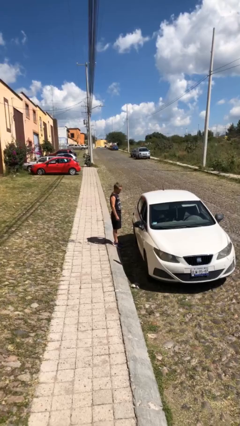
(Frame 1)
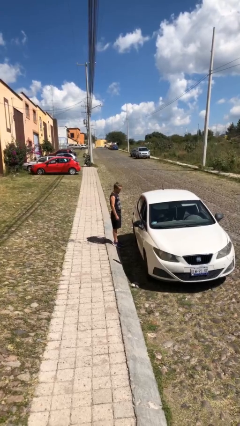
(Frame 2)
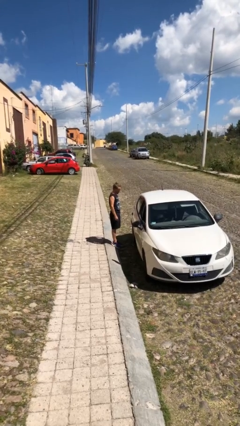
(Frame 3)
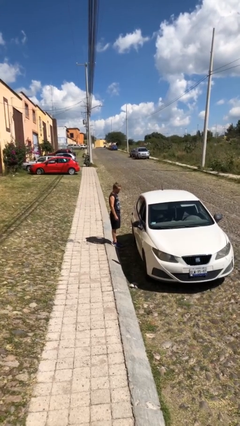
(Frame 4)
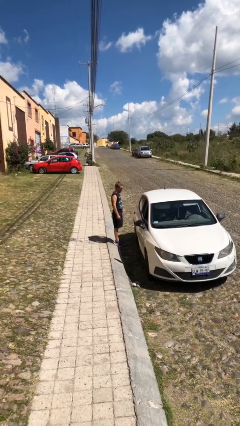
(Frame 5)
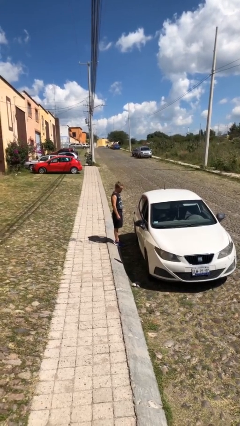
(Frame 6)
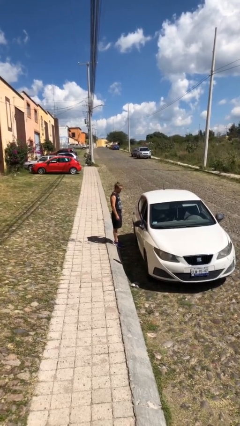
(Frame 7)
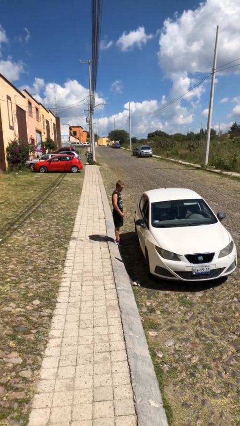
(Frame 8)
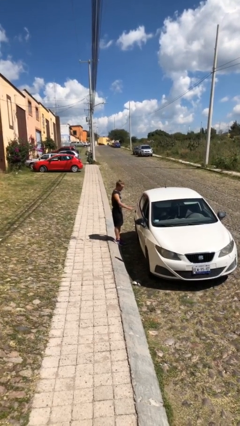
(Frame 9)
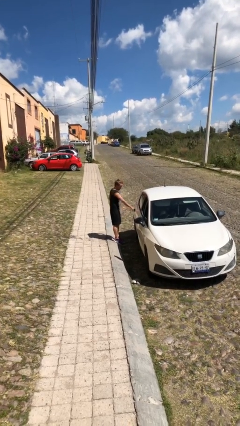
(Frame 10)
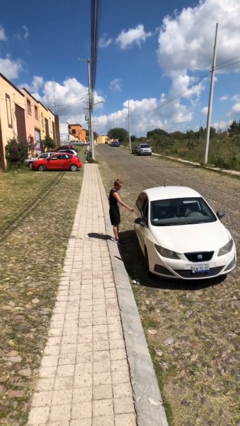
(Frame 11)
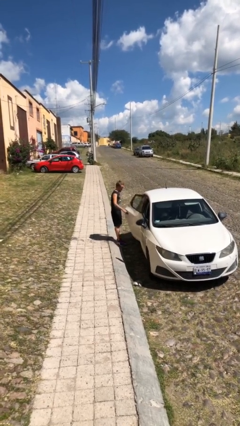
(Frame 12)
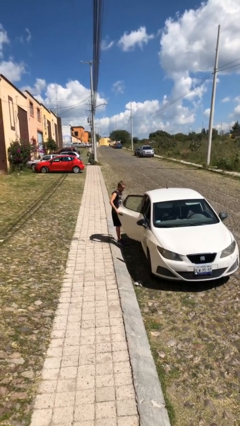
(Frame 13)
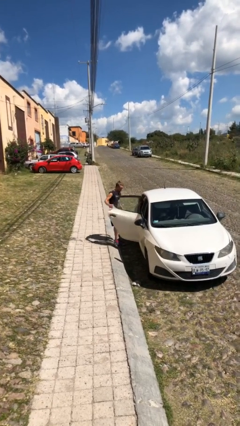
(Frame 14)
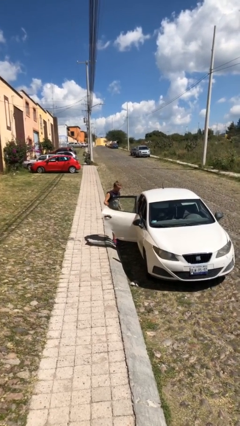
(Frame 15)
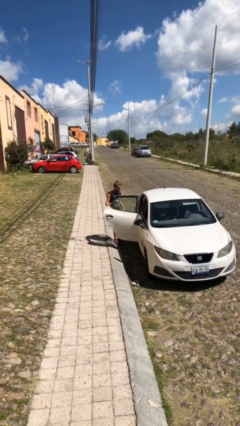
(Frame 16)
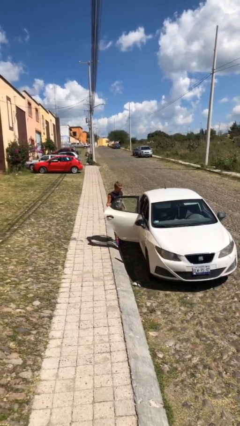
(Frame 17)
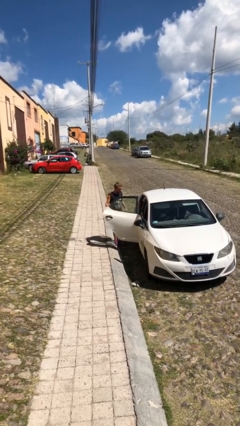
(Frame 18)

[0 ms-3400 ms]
person opens car door

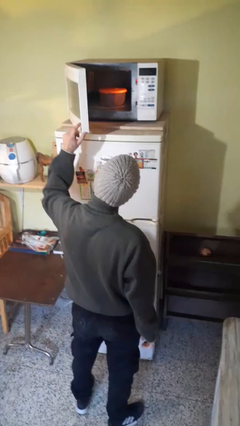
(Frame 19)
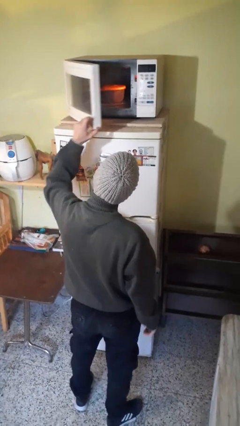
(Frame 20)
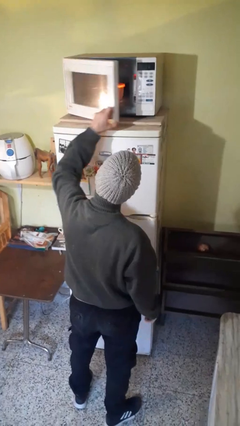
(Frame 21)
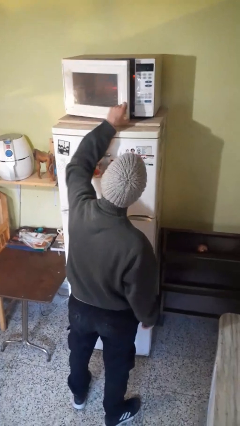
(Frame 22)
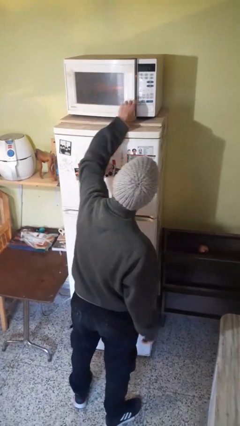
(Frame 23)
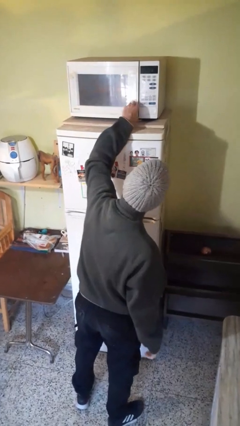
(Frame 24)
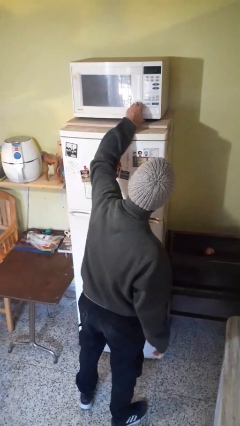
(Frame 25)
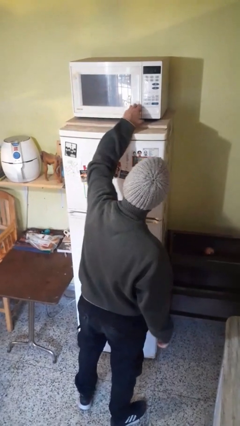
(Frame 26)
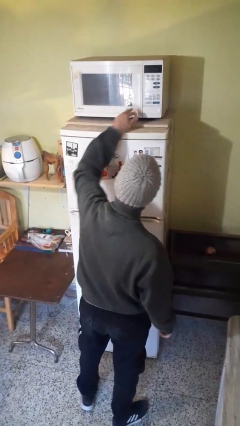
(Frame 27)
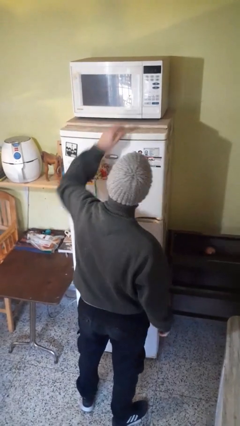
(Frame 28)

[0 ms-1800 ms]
person closes microwave

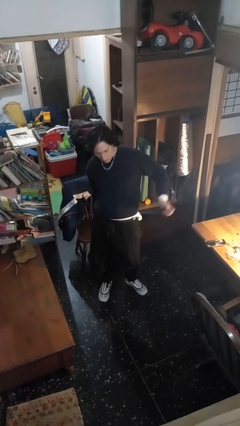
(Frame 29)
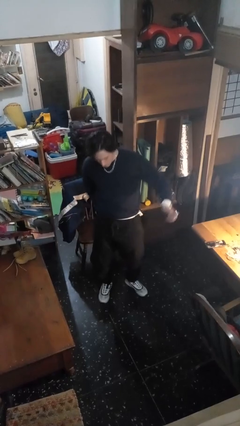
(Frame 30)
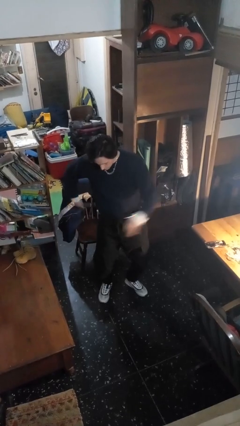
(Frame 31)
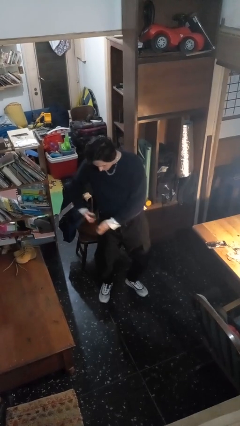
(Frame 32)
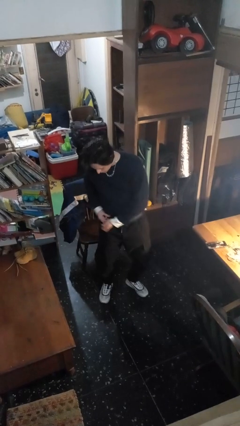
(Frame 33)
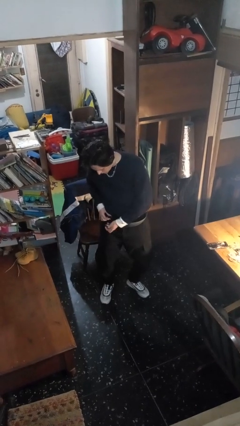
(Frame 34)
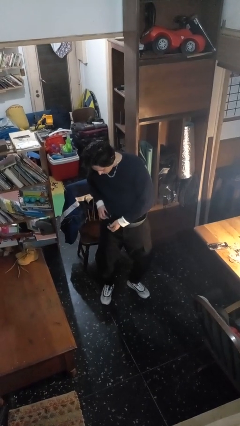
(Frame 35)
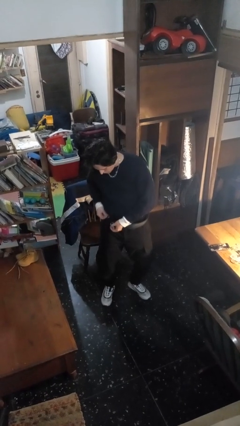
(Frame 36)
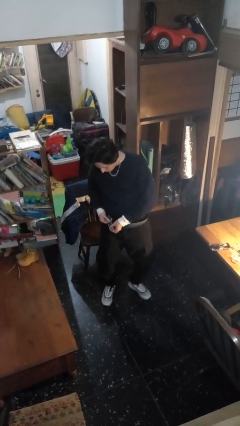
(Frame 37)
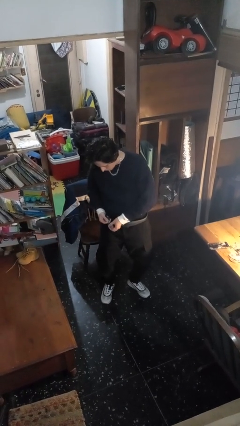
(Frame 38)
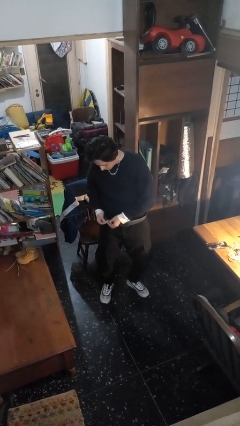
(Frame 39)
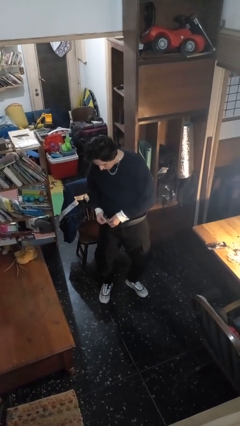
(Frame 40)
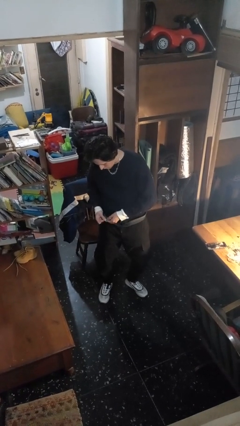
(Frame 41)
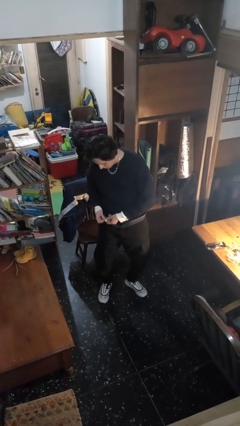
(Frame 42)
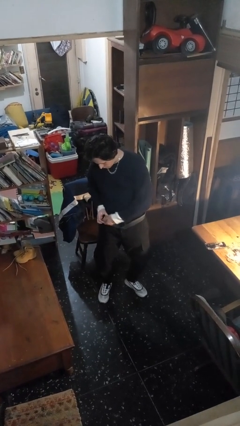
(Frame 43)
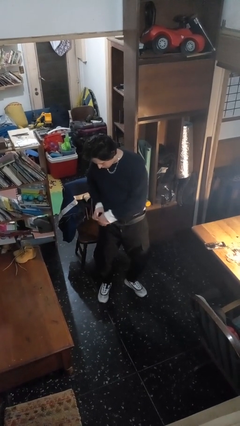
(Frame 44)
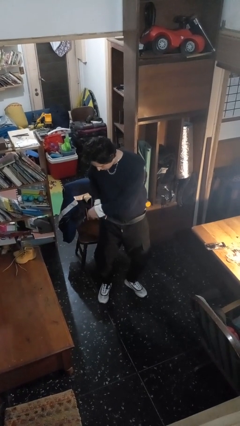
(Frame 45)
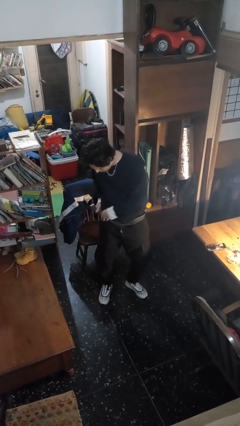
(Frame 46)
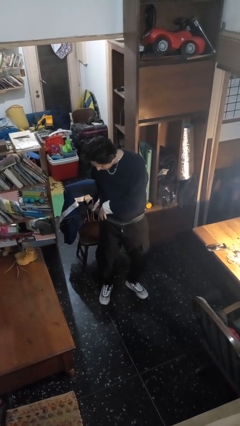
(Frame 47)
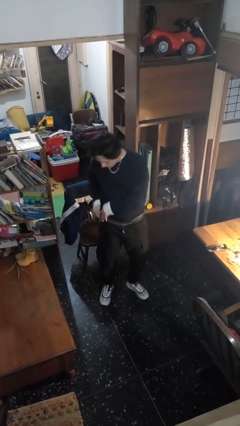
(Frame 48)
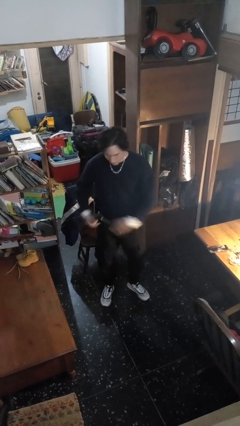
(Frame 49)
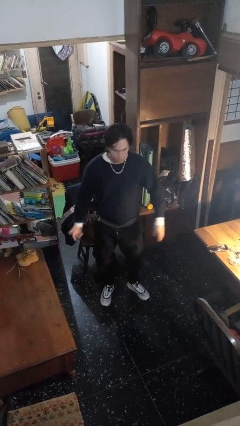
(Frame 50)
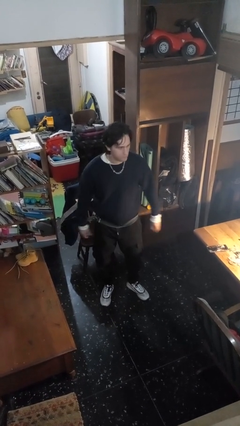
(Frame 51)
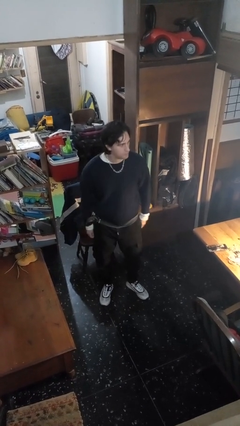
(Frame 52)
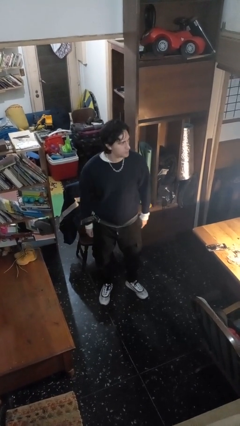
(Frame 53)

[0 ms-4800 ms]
person puts on belt

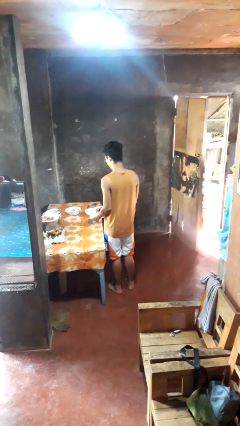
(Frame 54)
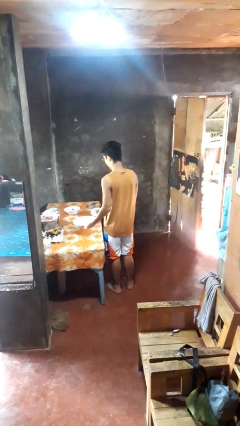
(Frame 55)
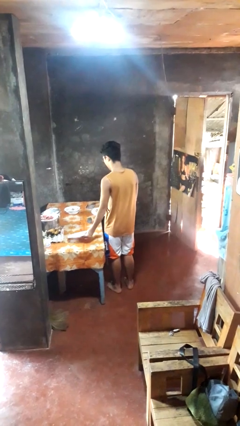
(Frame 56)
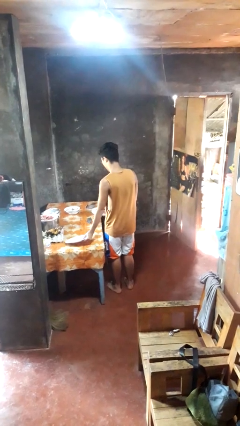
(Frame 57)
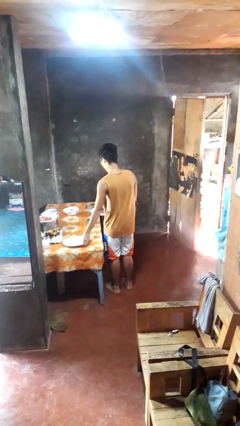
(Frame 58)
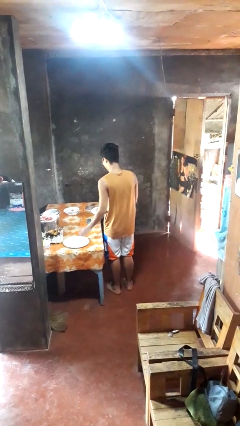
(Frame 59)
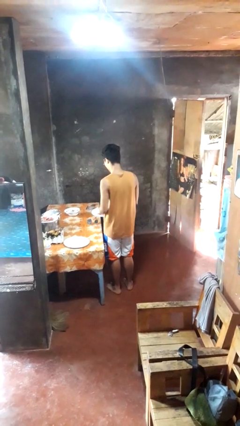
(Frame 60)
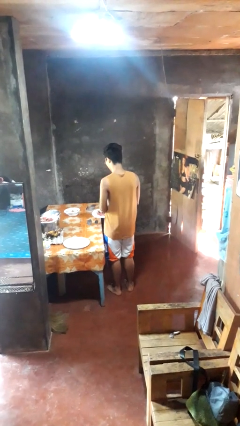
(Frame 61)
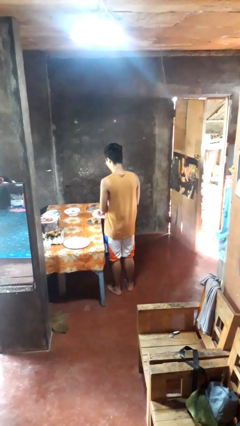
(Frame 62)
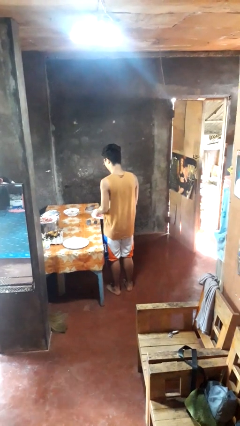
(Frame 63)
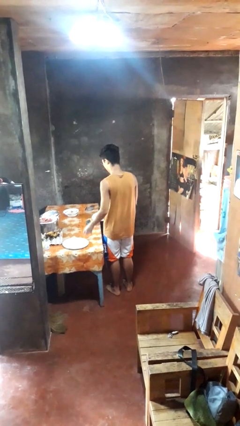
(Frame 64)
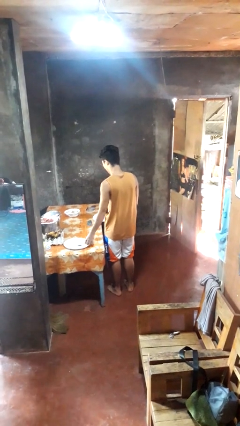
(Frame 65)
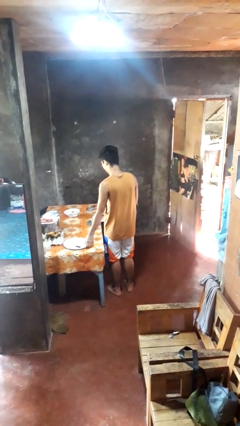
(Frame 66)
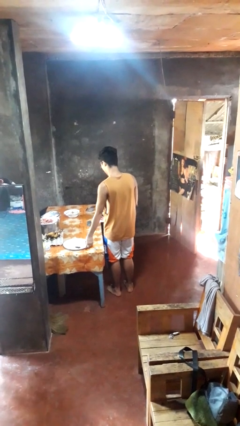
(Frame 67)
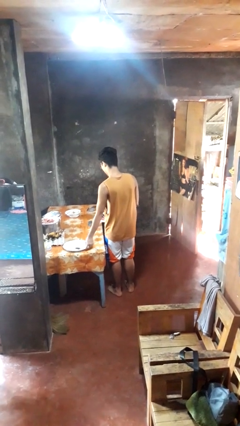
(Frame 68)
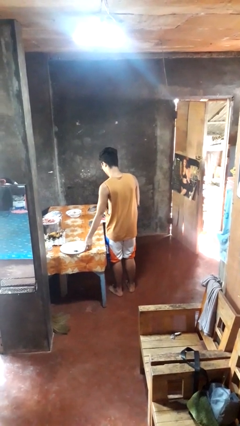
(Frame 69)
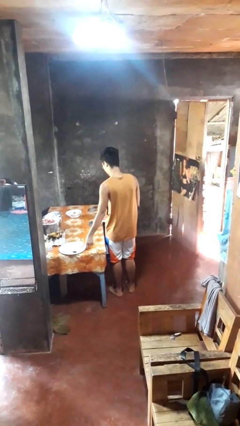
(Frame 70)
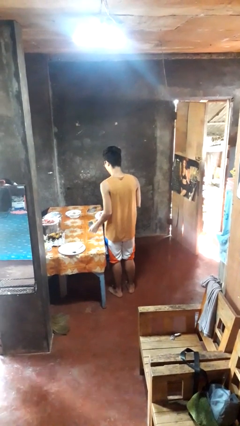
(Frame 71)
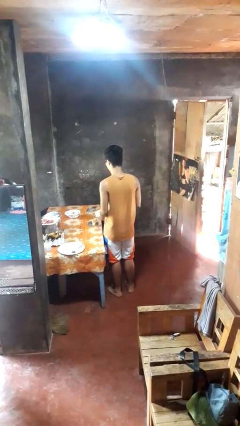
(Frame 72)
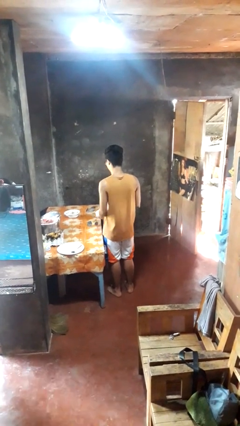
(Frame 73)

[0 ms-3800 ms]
person sets table

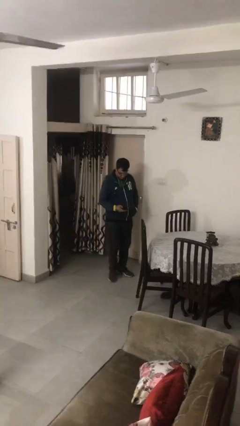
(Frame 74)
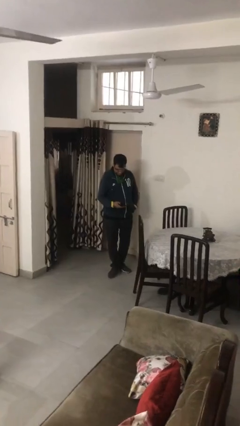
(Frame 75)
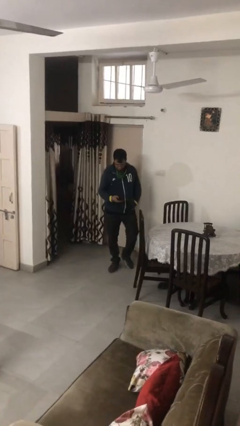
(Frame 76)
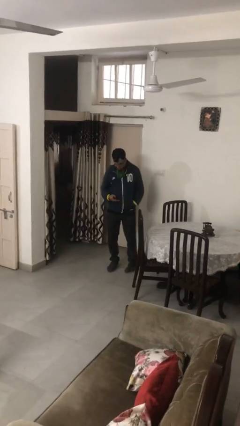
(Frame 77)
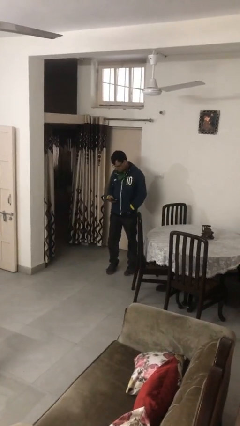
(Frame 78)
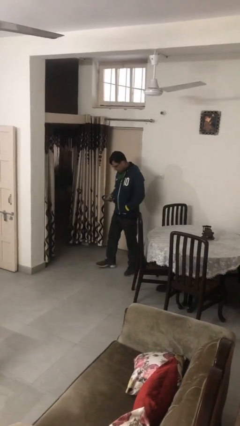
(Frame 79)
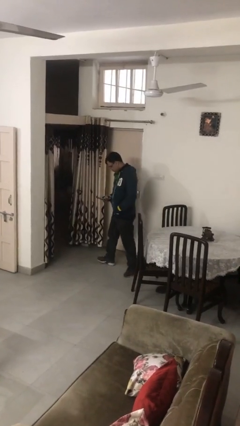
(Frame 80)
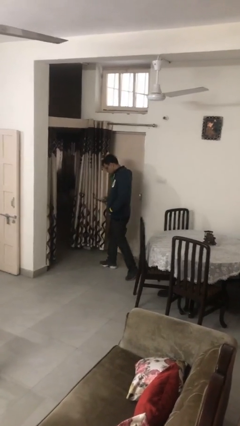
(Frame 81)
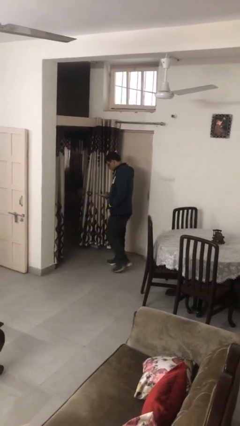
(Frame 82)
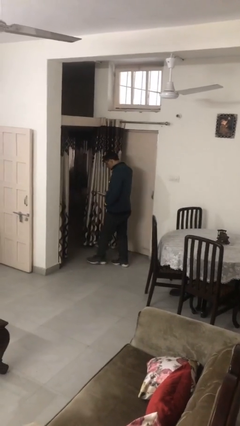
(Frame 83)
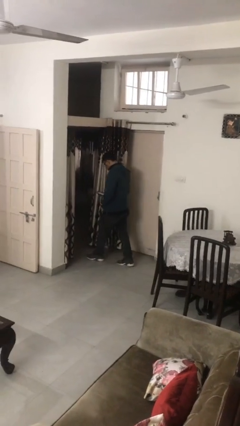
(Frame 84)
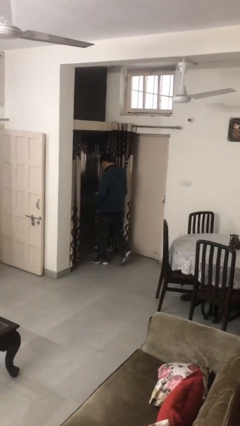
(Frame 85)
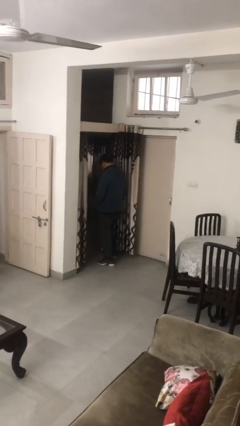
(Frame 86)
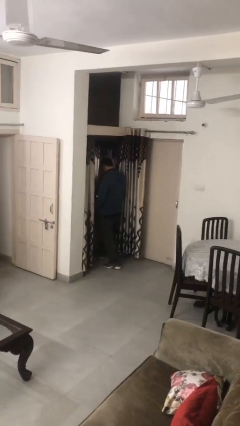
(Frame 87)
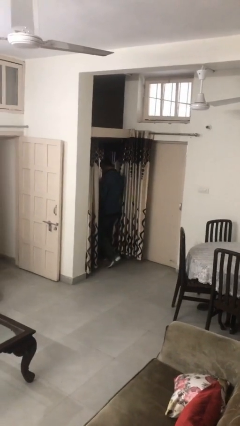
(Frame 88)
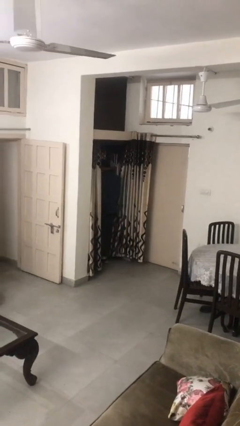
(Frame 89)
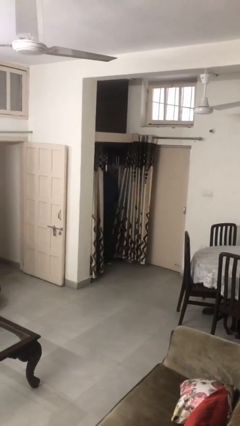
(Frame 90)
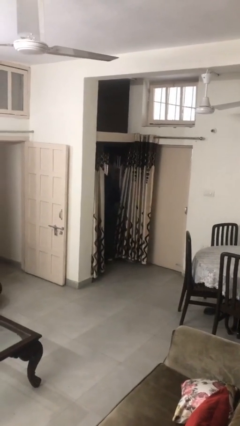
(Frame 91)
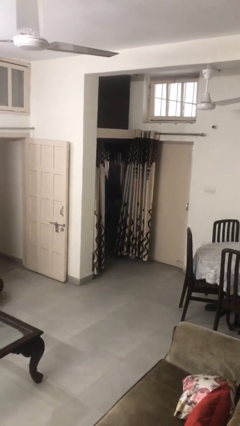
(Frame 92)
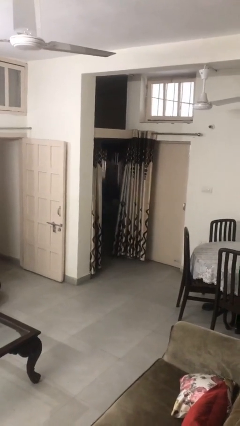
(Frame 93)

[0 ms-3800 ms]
person exits scene through structure

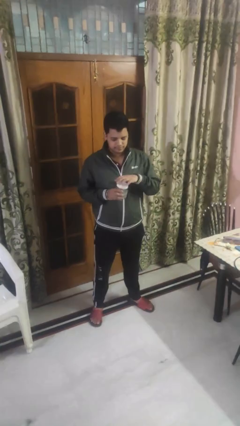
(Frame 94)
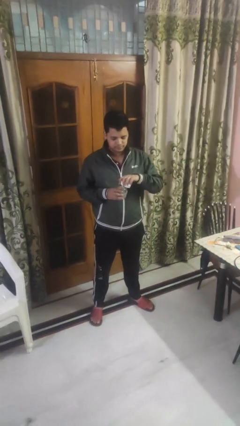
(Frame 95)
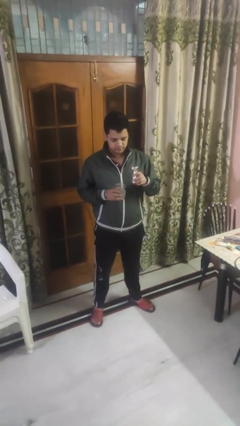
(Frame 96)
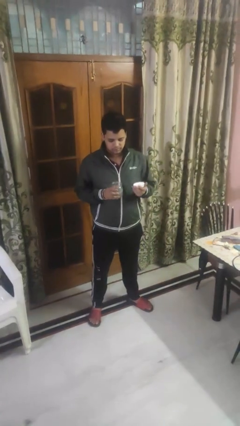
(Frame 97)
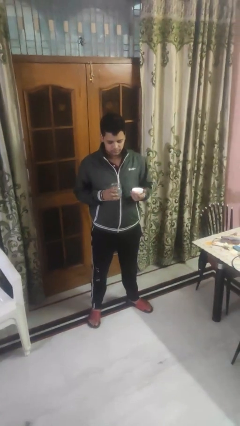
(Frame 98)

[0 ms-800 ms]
person opens jar
